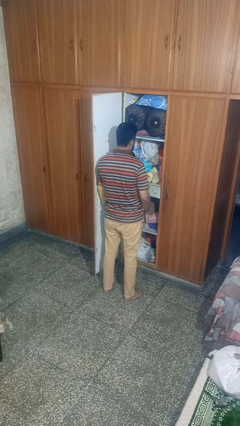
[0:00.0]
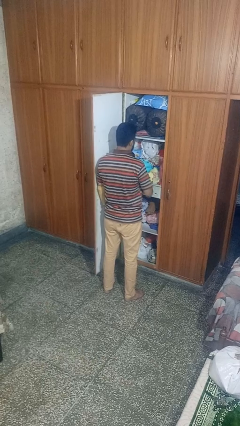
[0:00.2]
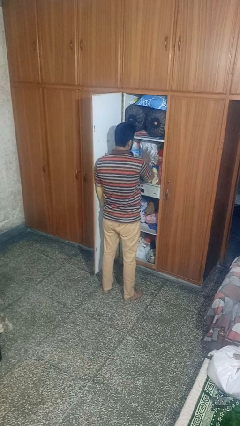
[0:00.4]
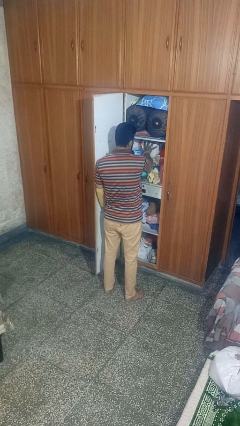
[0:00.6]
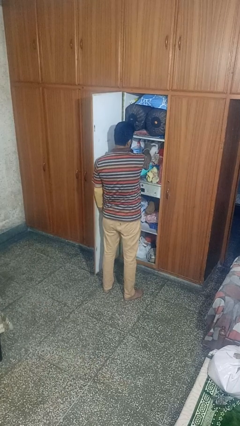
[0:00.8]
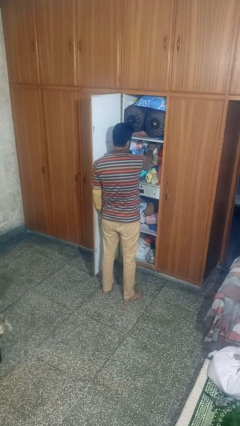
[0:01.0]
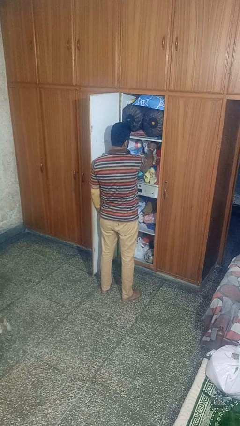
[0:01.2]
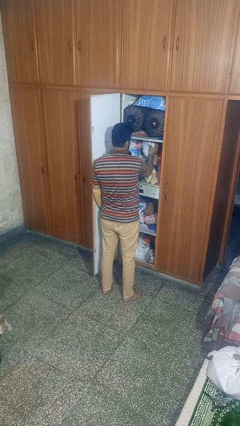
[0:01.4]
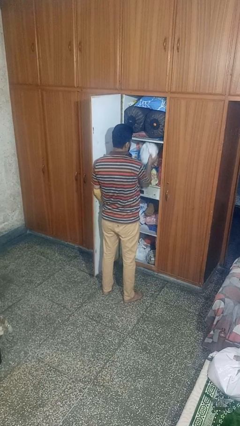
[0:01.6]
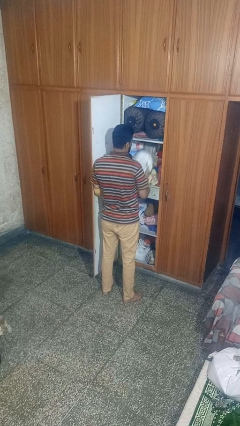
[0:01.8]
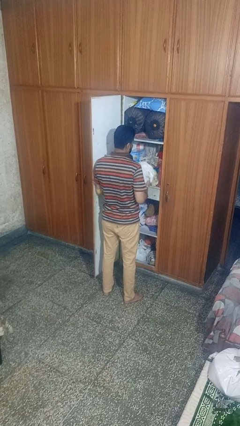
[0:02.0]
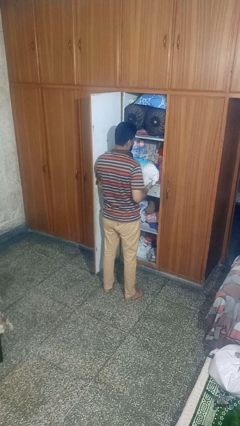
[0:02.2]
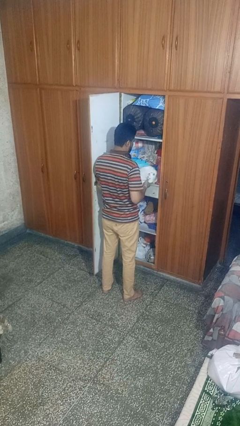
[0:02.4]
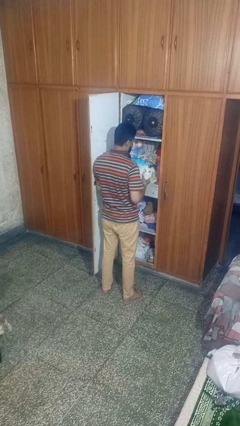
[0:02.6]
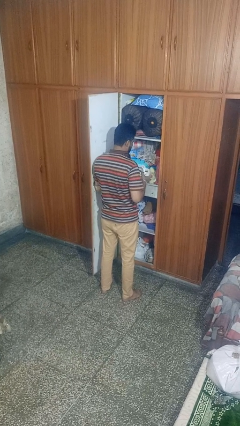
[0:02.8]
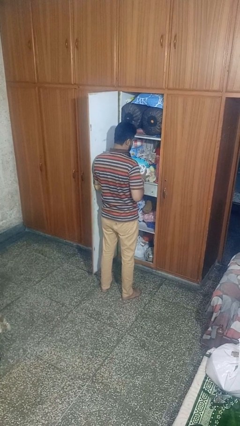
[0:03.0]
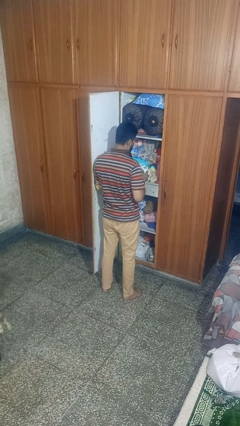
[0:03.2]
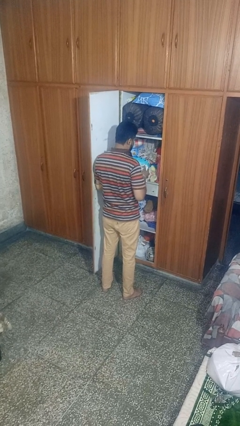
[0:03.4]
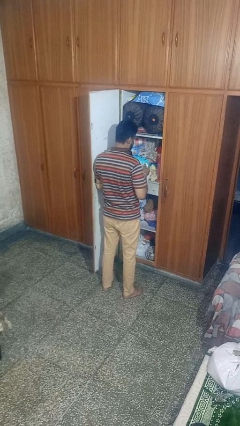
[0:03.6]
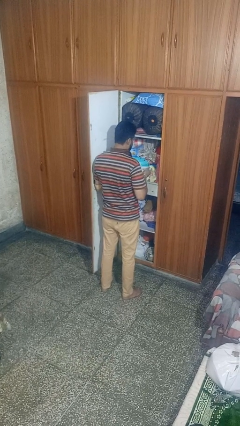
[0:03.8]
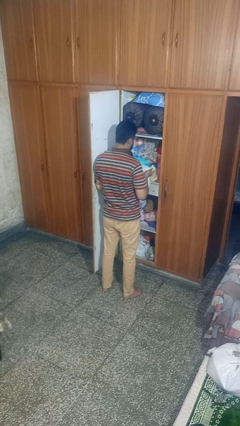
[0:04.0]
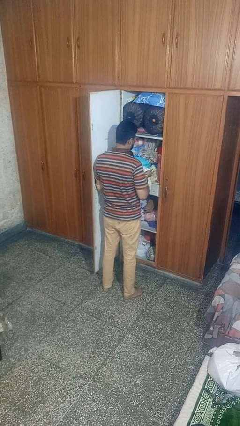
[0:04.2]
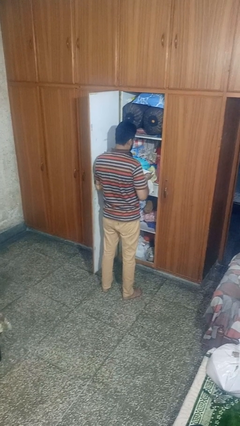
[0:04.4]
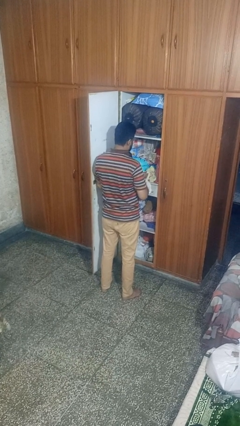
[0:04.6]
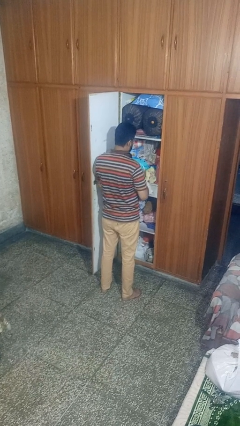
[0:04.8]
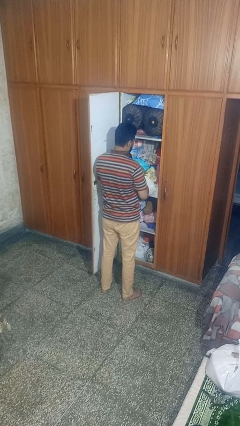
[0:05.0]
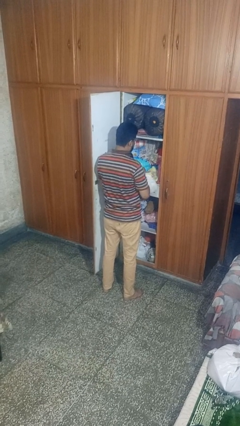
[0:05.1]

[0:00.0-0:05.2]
person picks up object from cabinet

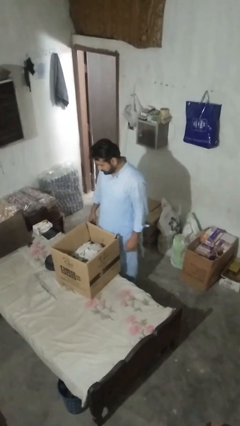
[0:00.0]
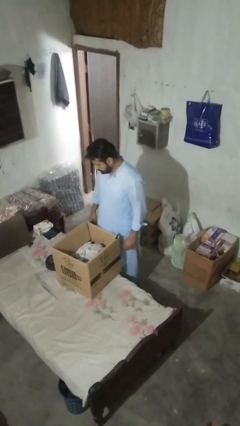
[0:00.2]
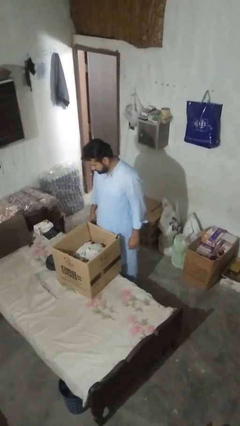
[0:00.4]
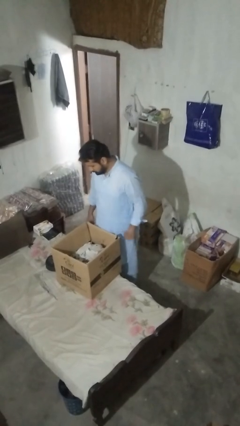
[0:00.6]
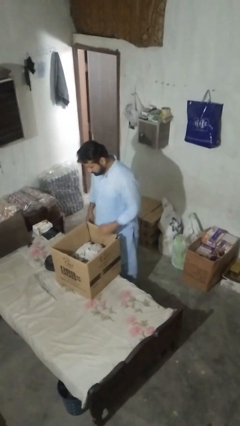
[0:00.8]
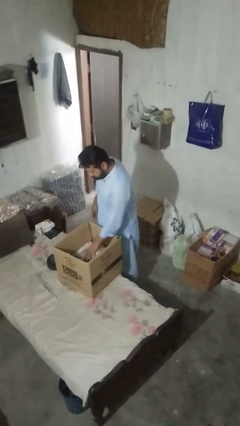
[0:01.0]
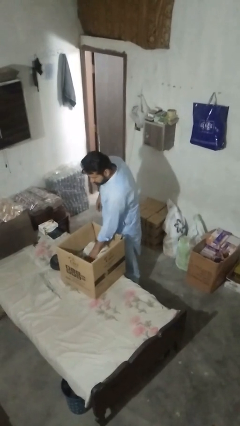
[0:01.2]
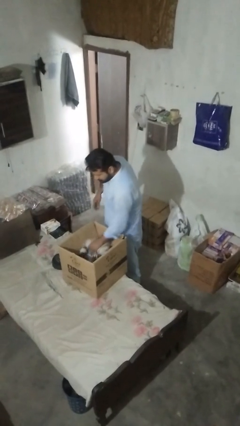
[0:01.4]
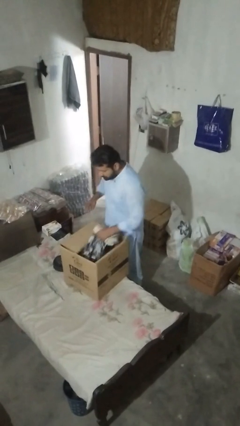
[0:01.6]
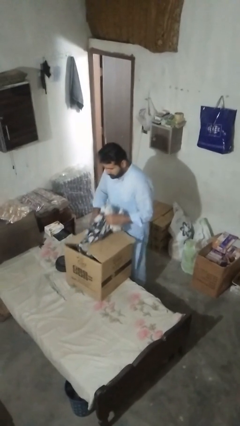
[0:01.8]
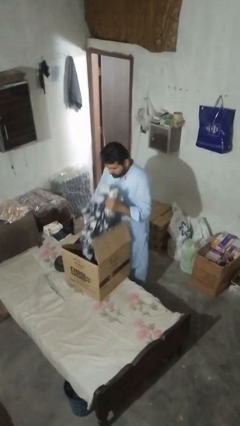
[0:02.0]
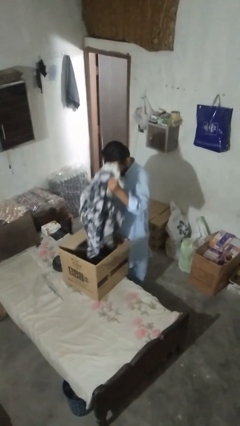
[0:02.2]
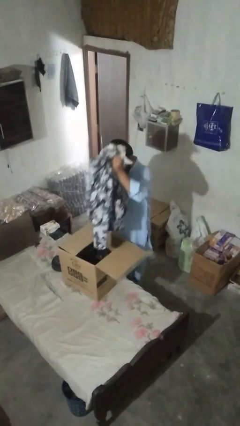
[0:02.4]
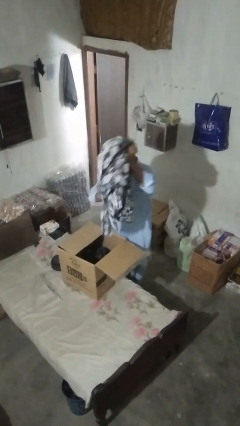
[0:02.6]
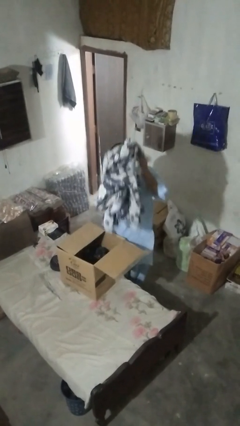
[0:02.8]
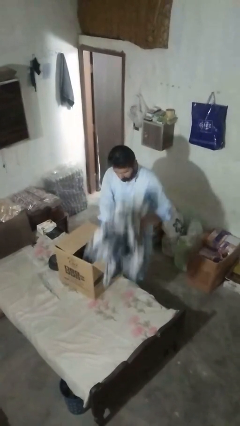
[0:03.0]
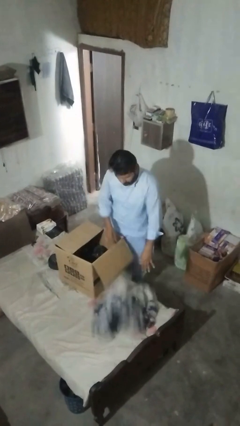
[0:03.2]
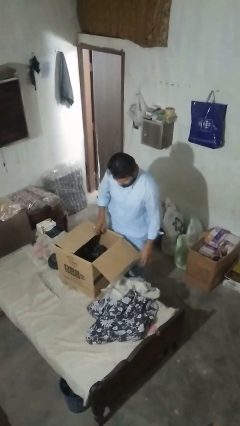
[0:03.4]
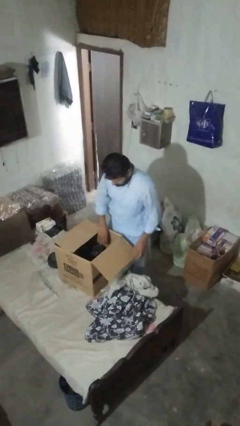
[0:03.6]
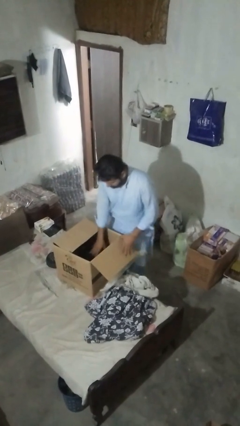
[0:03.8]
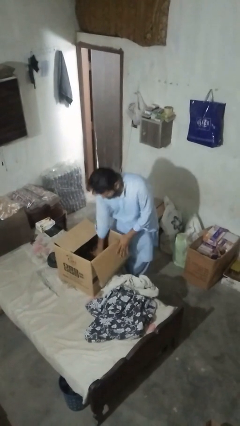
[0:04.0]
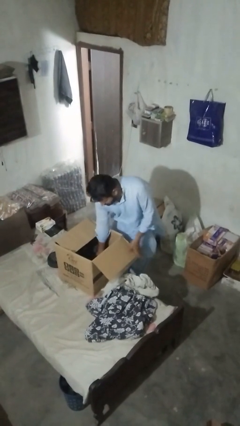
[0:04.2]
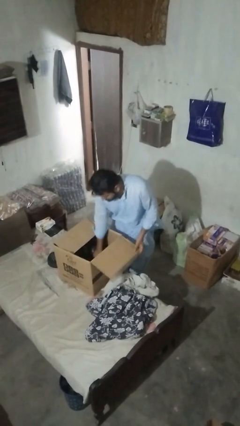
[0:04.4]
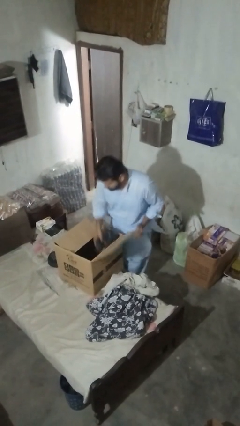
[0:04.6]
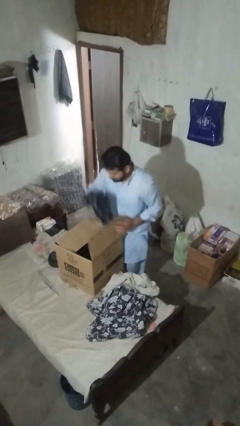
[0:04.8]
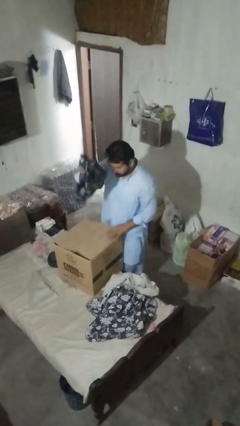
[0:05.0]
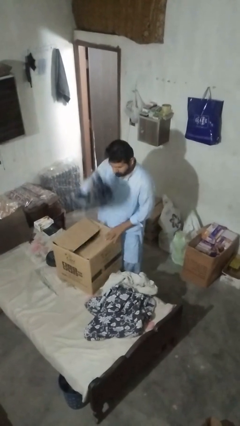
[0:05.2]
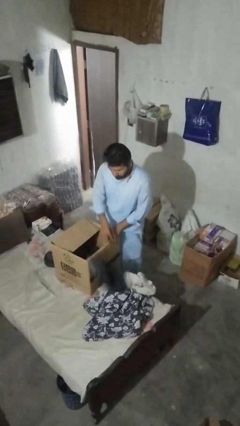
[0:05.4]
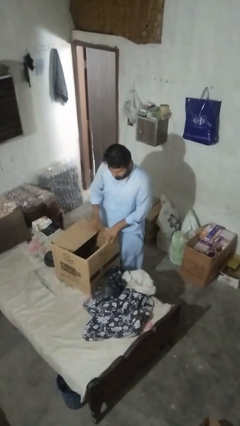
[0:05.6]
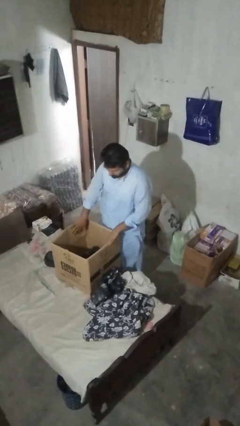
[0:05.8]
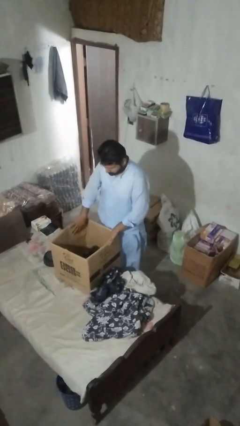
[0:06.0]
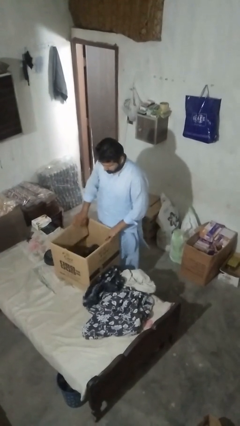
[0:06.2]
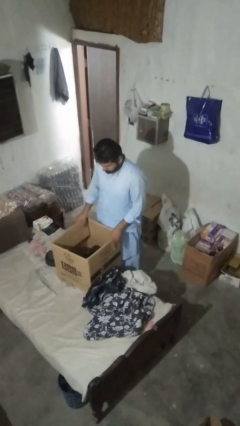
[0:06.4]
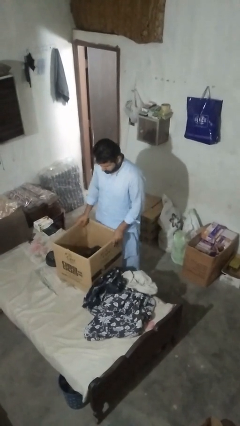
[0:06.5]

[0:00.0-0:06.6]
person unloads clotheswasher

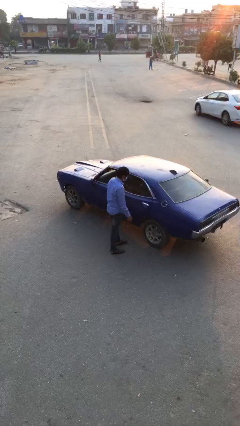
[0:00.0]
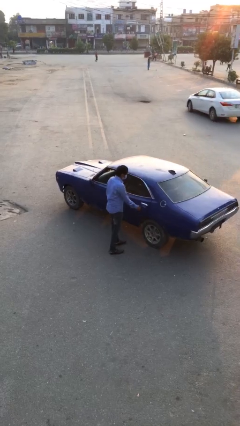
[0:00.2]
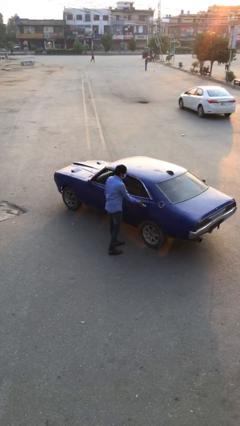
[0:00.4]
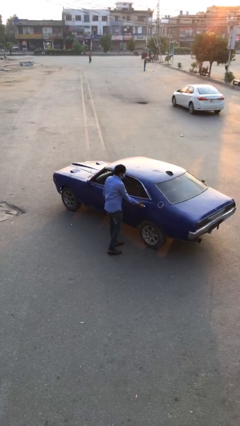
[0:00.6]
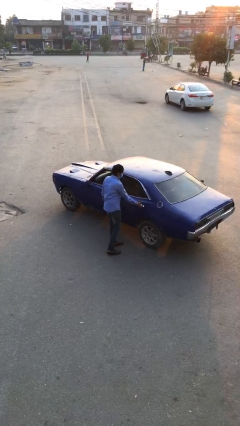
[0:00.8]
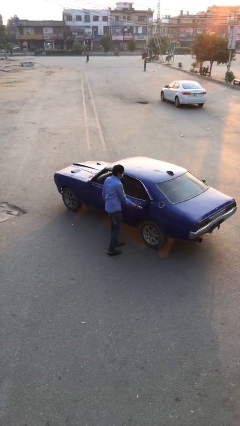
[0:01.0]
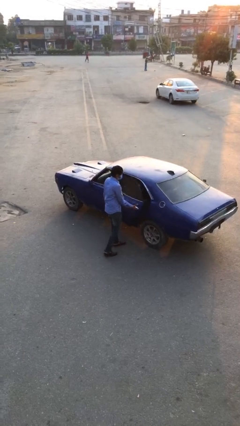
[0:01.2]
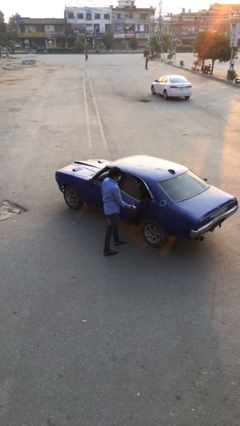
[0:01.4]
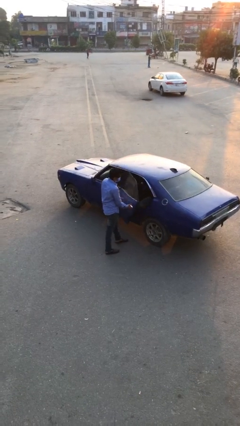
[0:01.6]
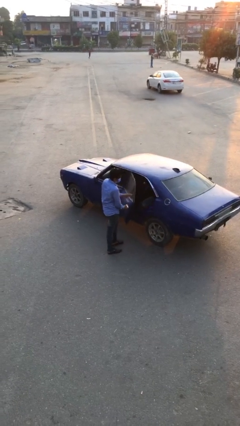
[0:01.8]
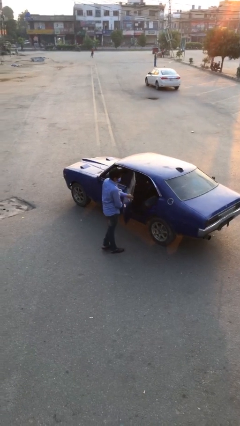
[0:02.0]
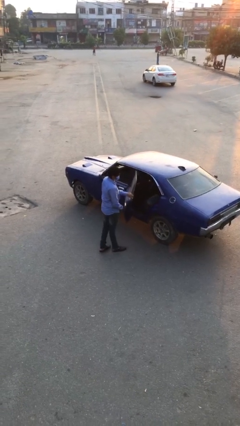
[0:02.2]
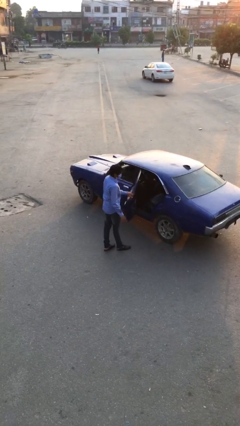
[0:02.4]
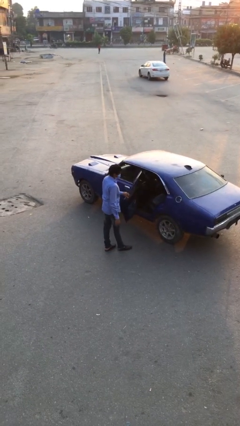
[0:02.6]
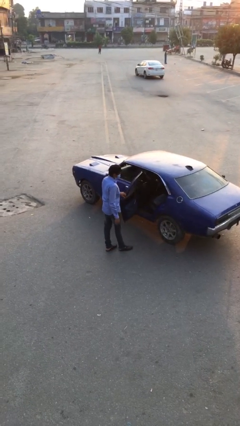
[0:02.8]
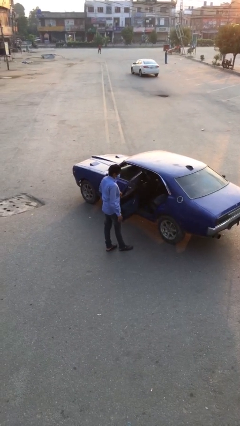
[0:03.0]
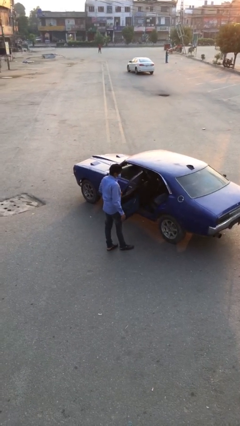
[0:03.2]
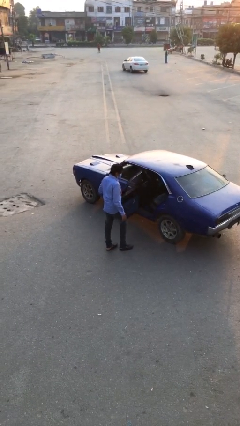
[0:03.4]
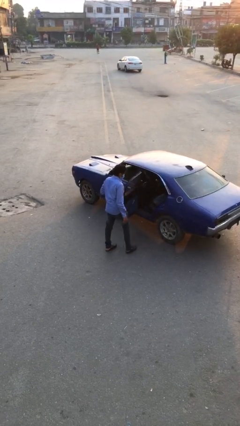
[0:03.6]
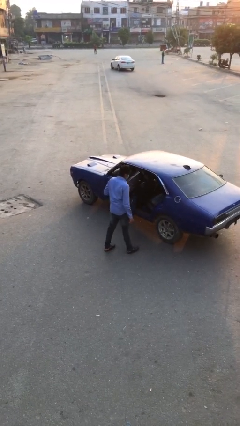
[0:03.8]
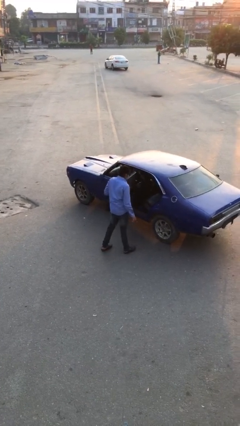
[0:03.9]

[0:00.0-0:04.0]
person opens car door

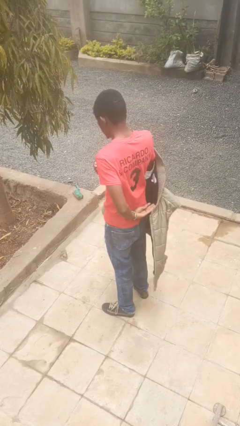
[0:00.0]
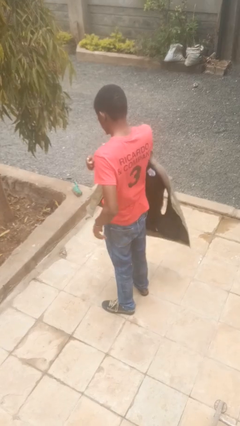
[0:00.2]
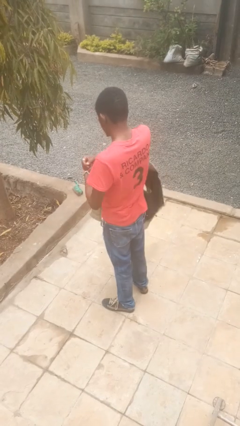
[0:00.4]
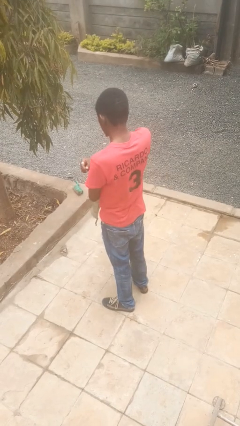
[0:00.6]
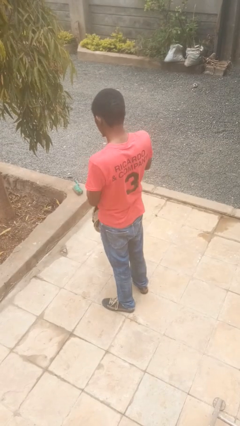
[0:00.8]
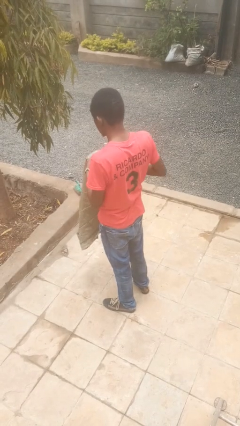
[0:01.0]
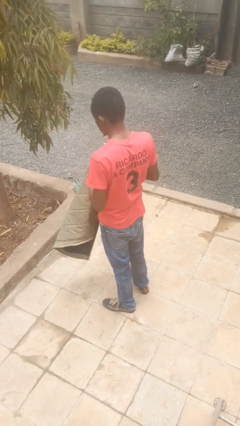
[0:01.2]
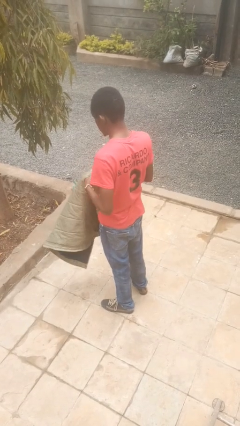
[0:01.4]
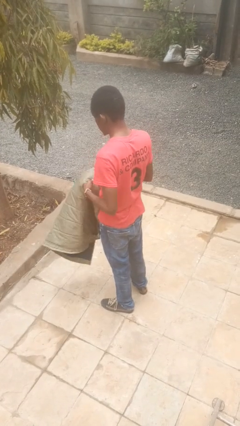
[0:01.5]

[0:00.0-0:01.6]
person takes off jacket

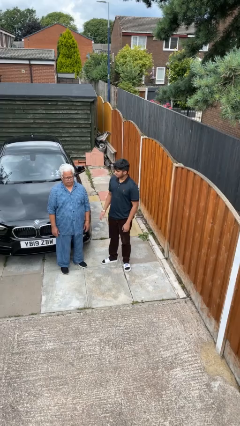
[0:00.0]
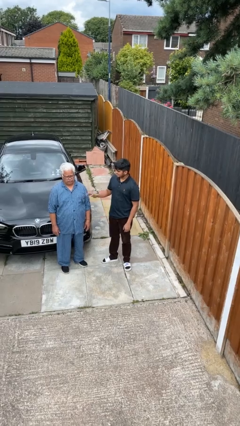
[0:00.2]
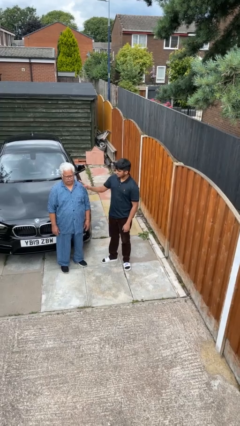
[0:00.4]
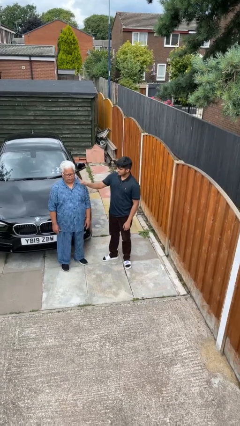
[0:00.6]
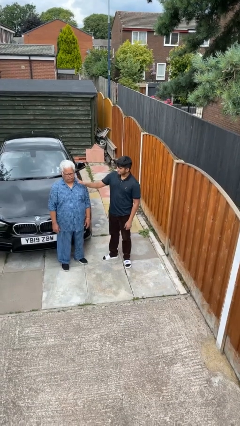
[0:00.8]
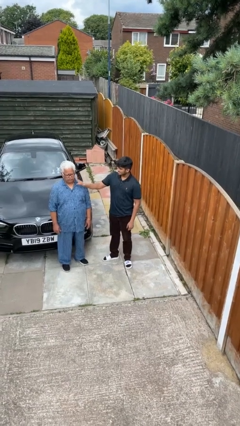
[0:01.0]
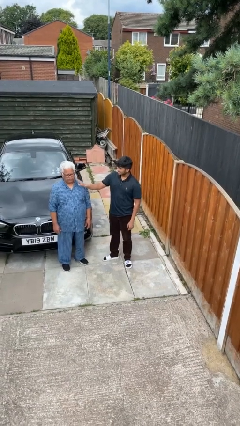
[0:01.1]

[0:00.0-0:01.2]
person touches face of person
